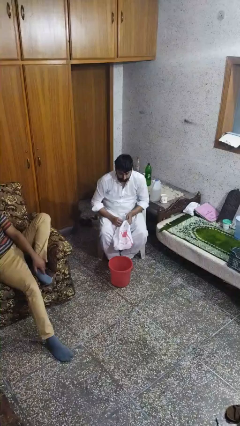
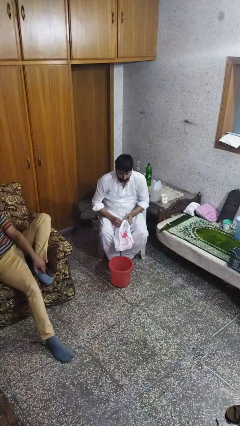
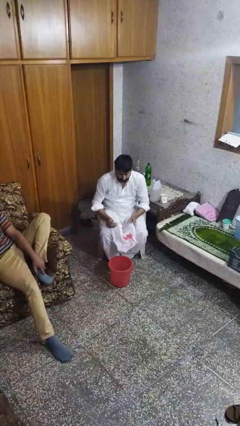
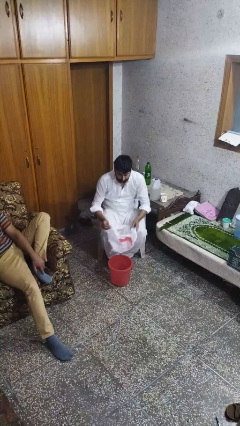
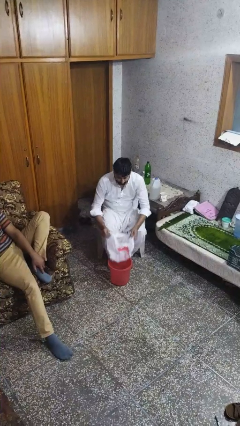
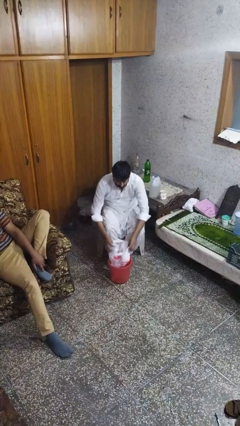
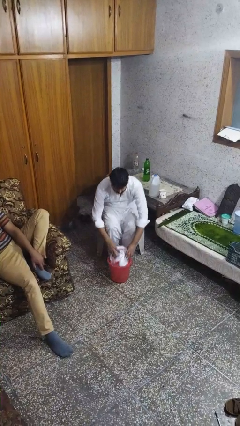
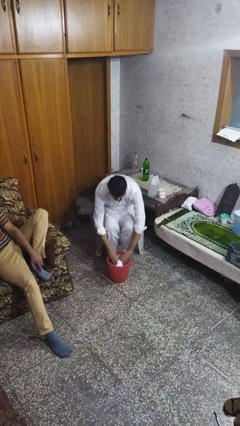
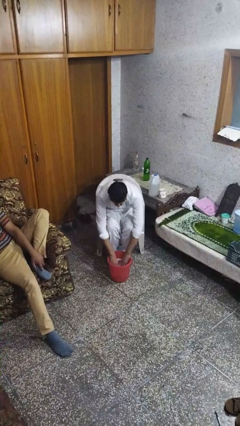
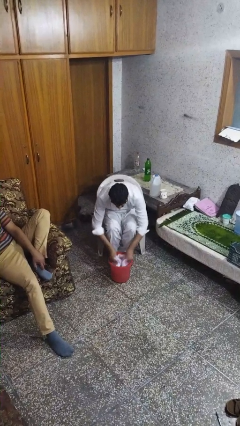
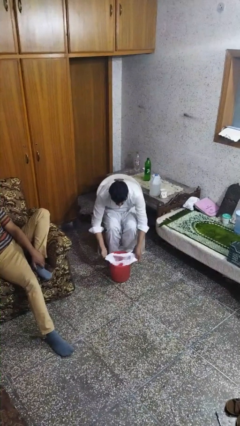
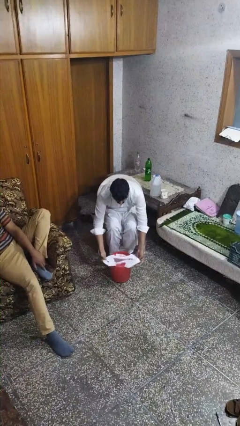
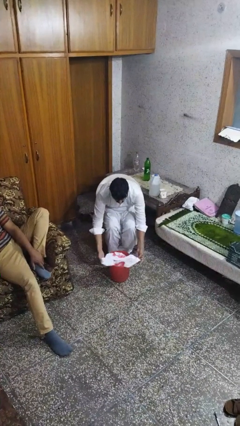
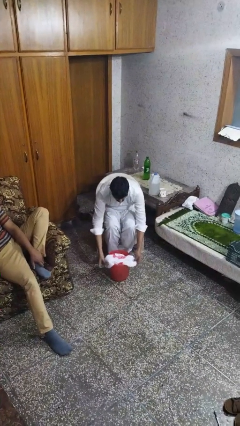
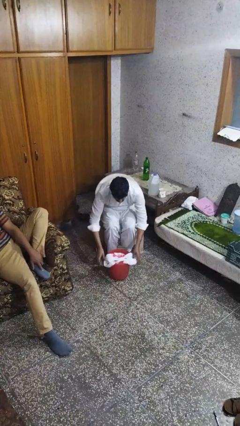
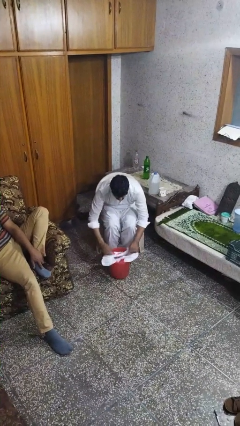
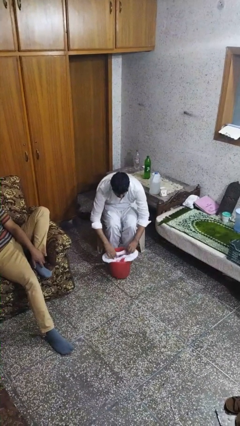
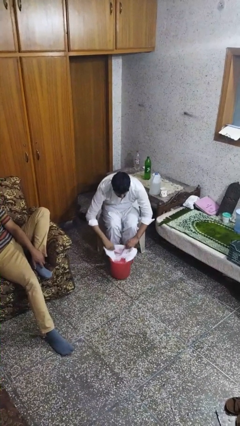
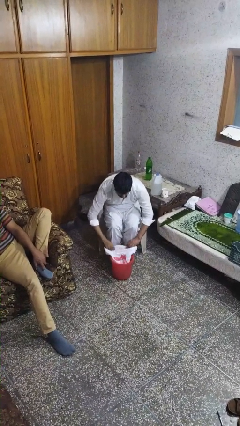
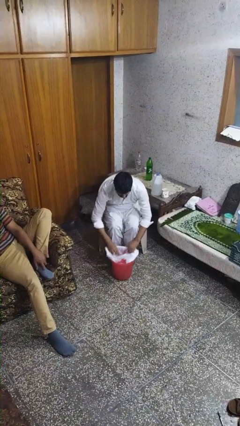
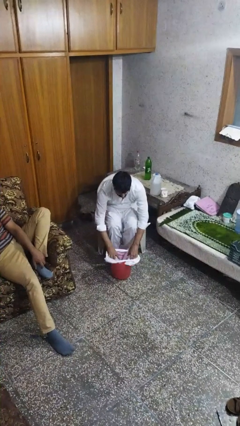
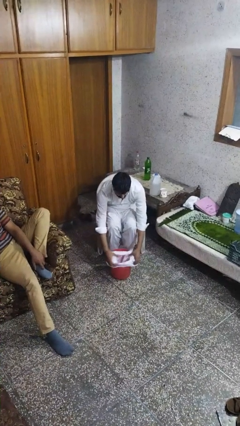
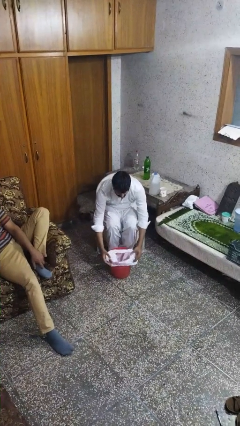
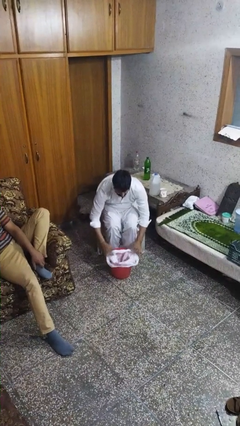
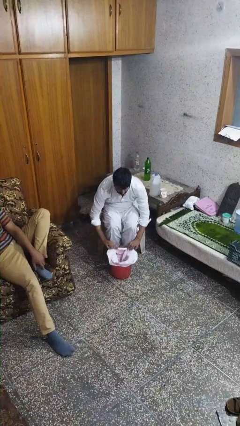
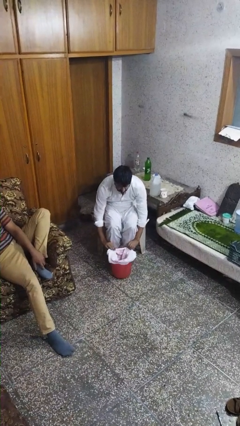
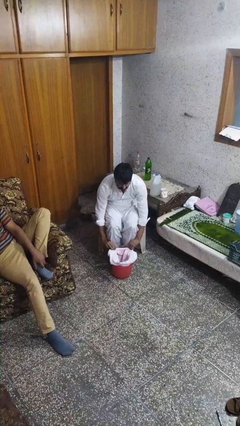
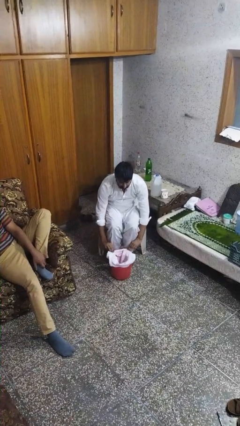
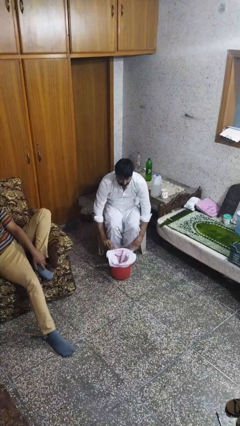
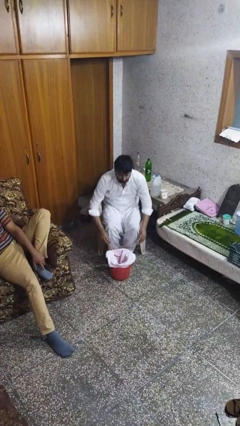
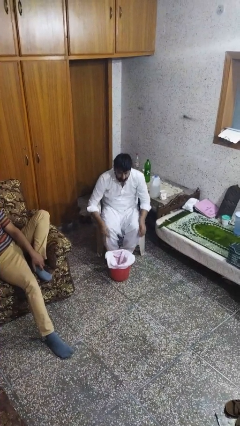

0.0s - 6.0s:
person inserts trashbag into trashcan

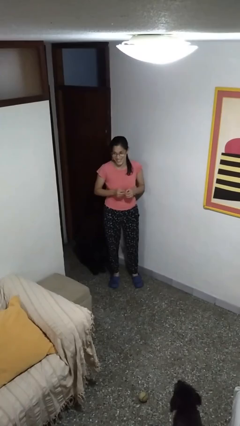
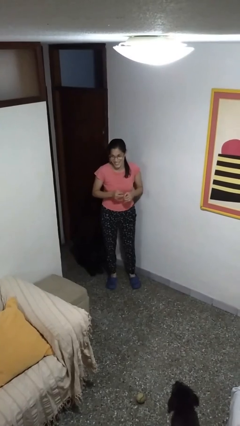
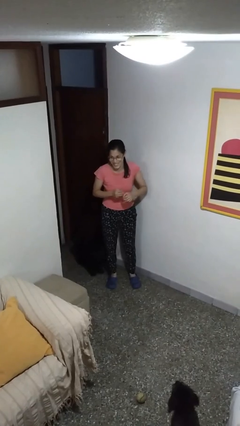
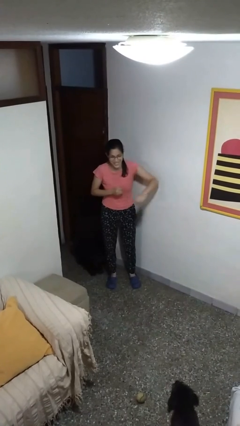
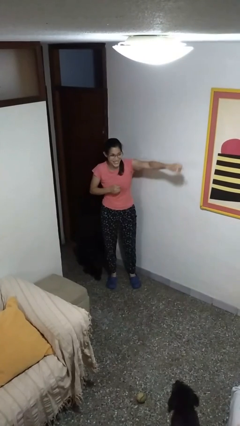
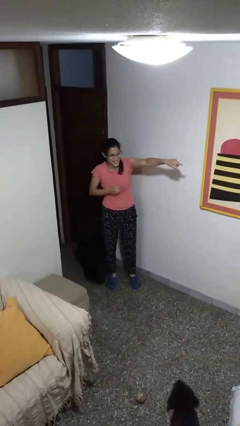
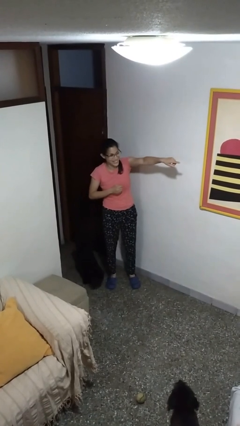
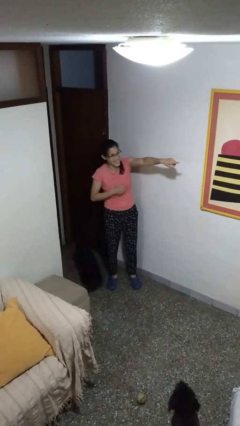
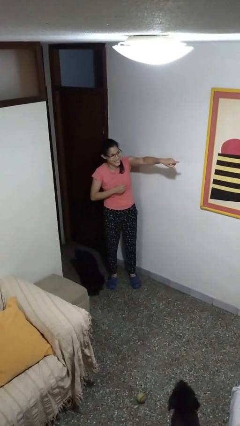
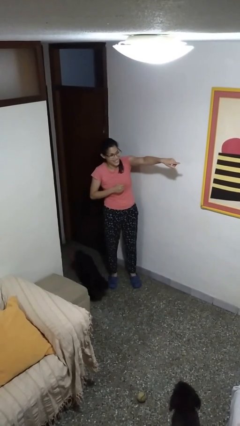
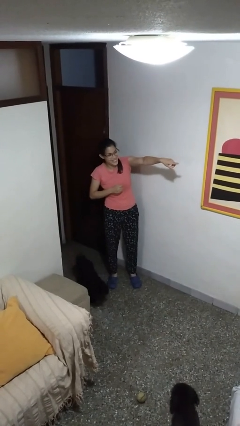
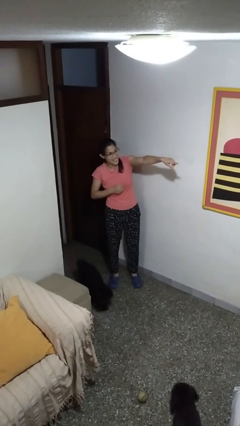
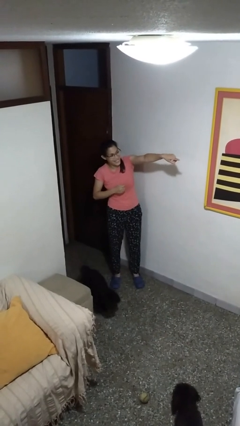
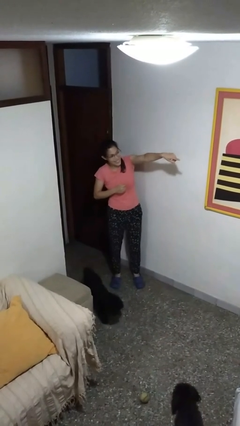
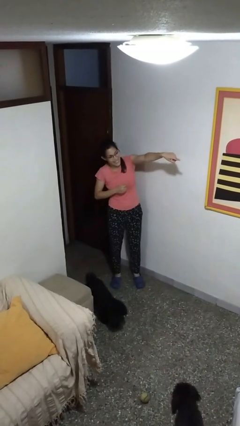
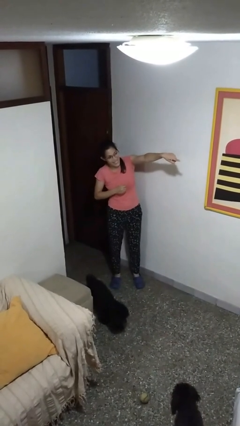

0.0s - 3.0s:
person points at person

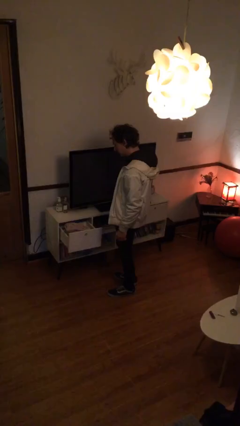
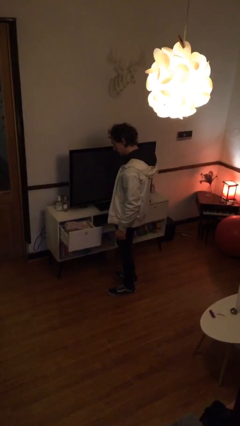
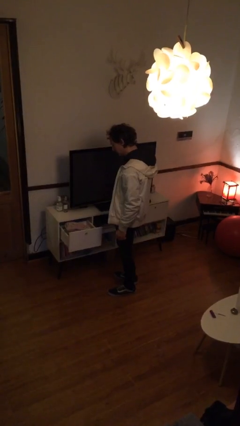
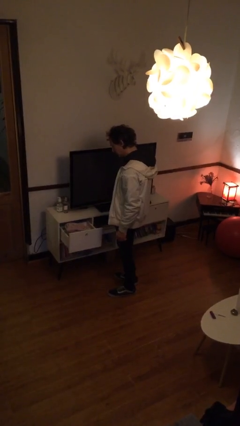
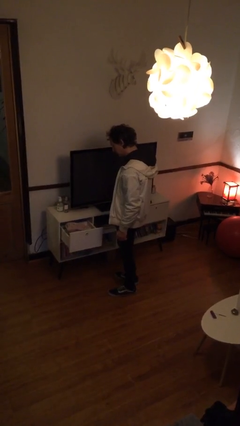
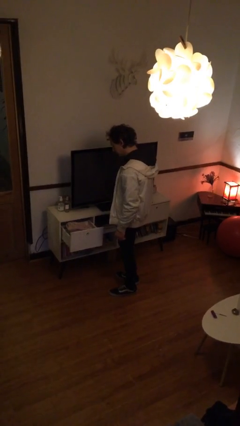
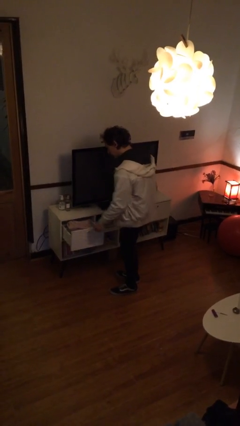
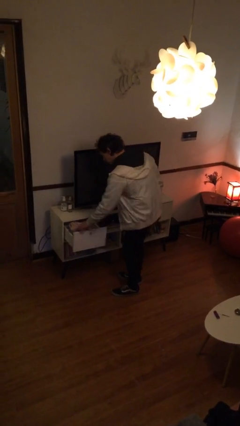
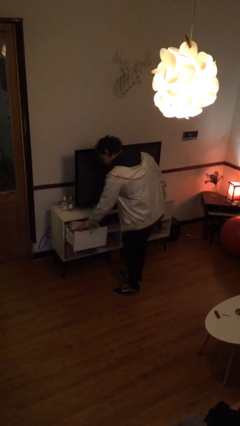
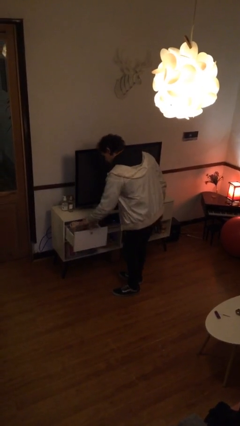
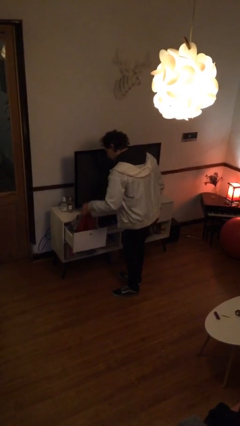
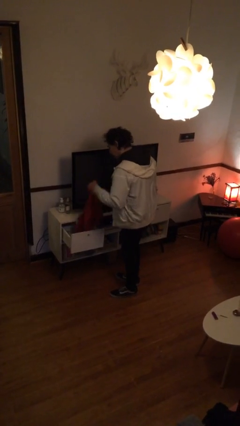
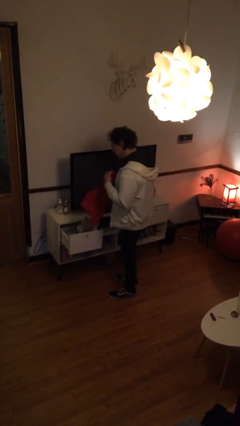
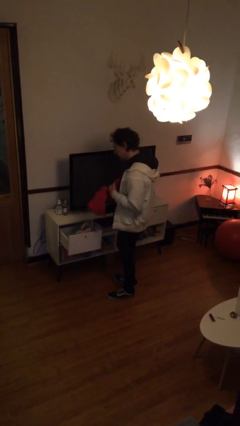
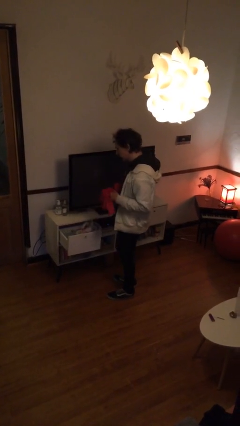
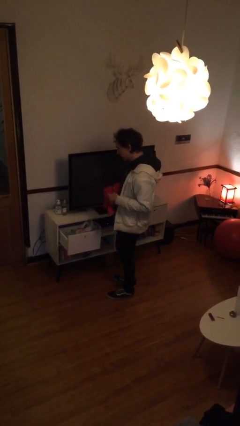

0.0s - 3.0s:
person takes clothes from dresser

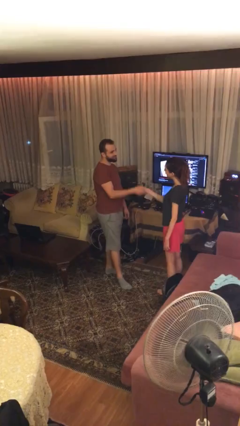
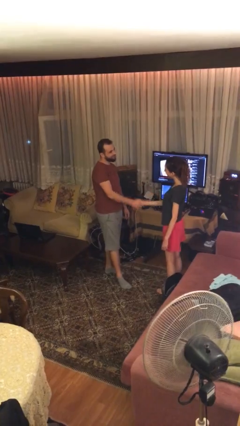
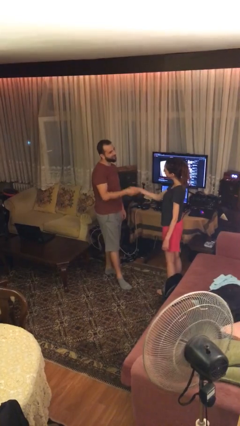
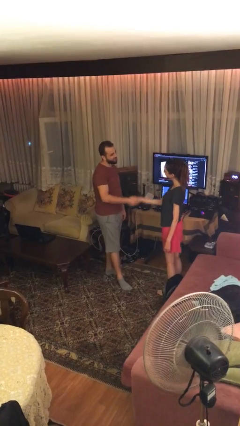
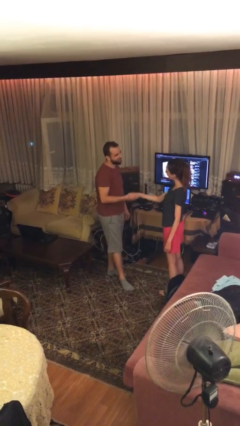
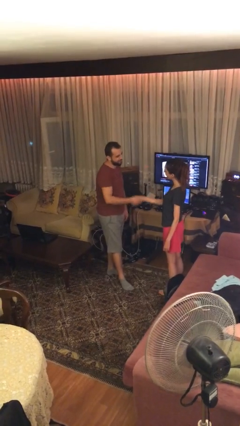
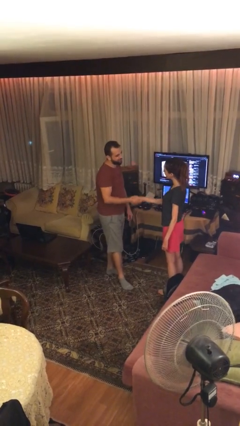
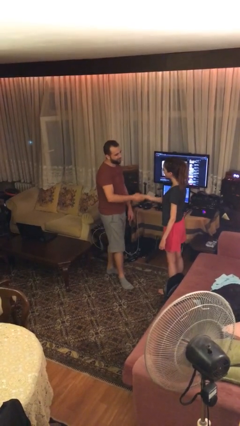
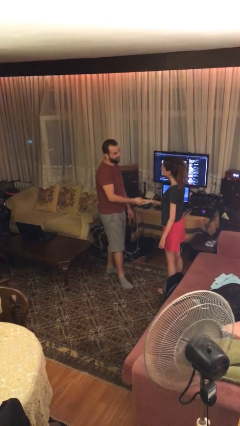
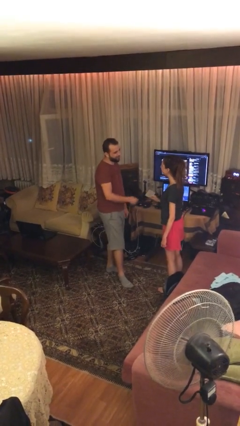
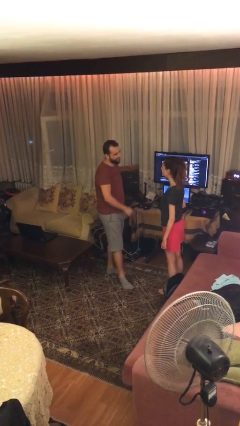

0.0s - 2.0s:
person shakes hand

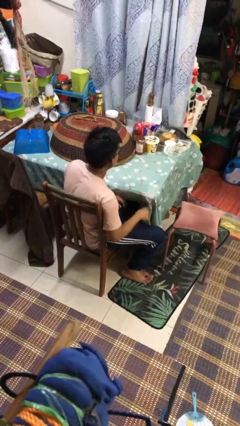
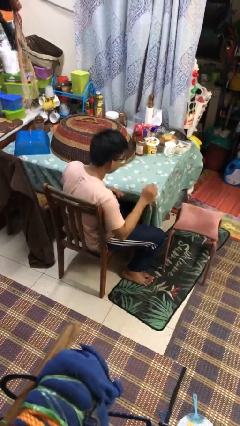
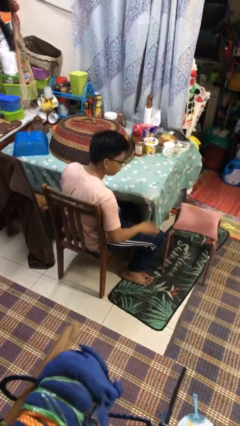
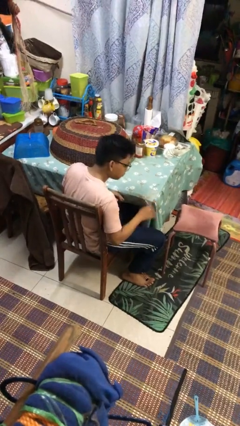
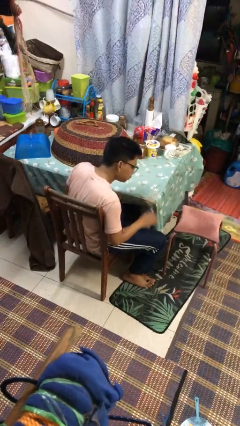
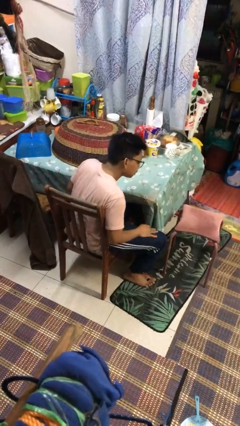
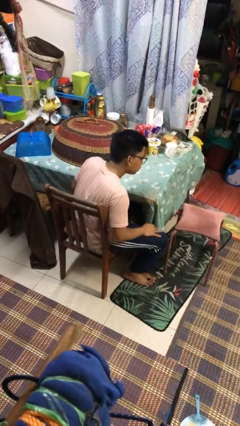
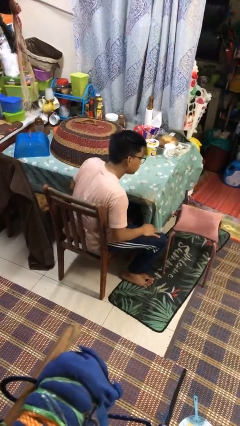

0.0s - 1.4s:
person slaps hands on thighs

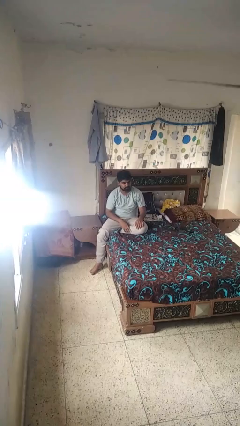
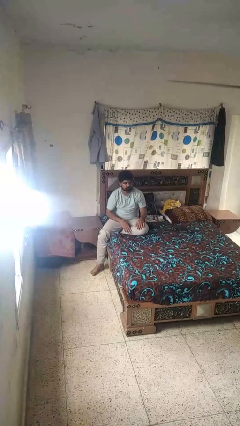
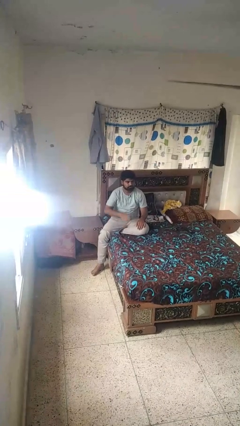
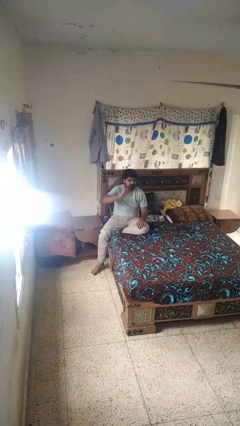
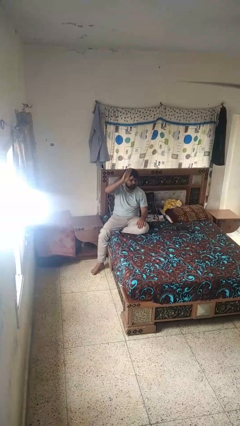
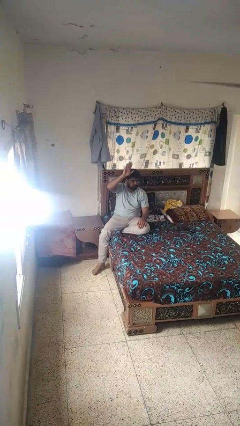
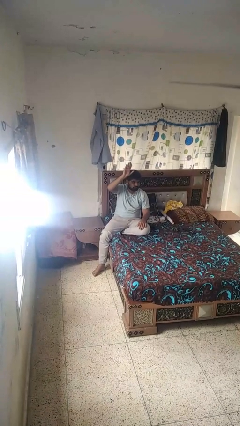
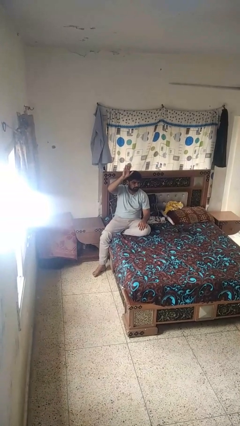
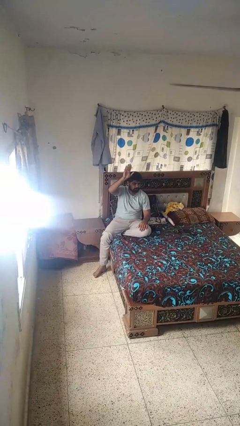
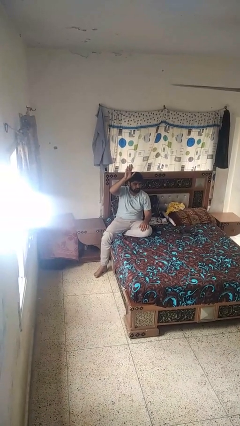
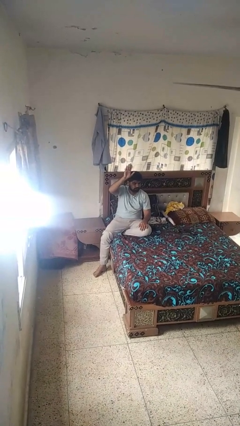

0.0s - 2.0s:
person gestures raise hand

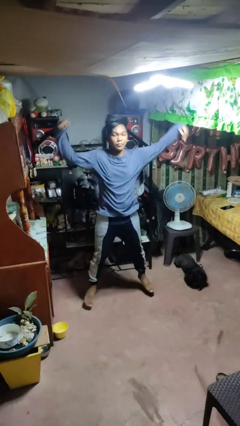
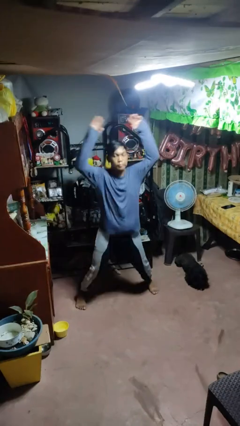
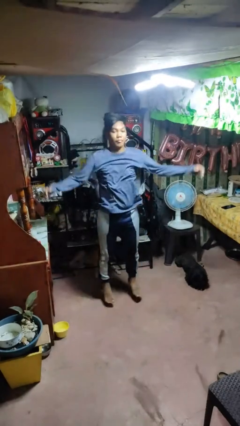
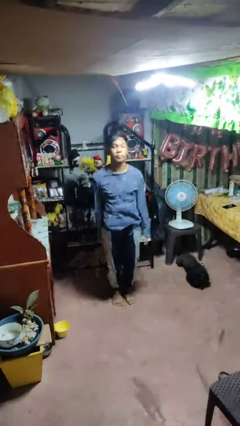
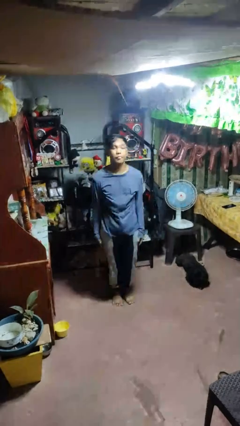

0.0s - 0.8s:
person exercises with jumping jacks
